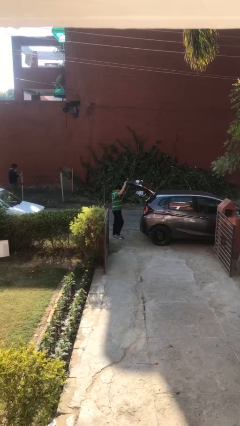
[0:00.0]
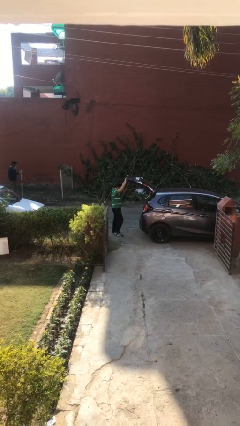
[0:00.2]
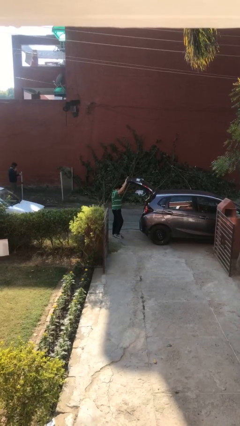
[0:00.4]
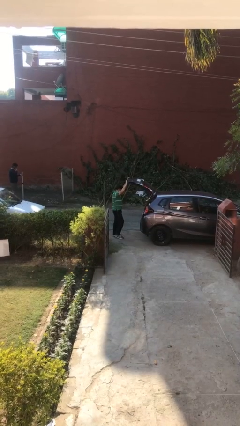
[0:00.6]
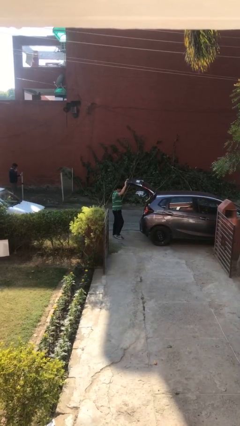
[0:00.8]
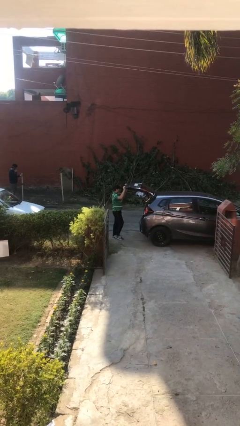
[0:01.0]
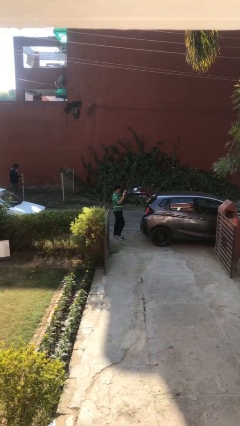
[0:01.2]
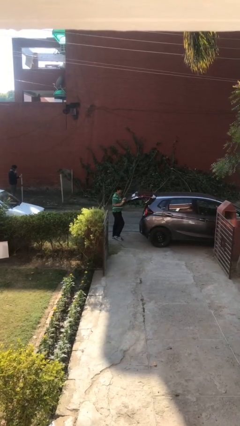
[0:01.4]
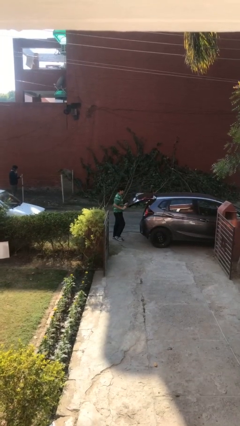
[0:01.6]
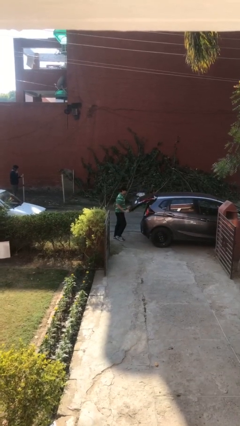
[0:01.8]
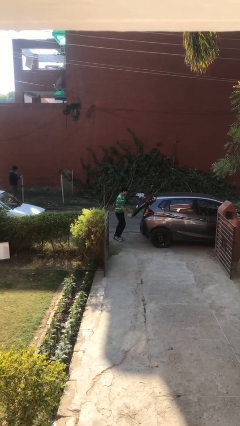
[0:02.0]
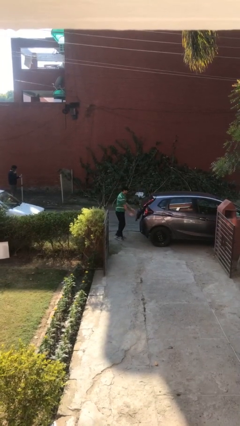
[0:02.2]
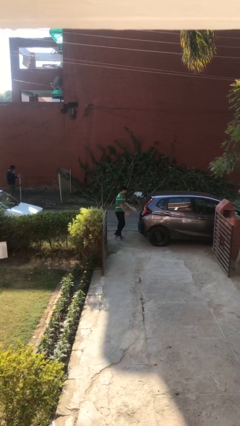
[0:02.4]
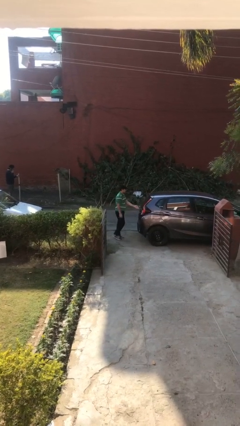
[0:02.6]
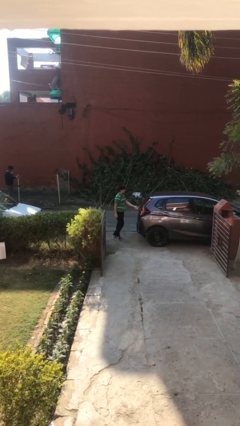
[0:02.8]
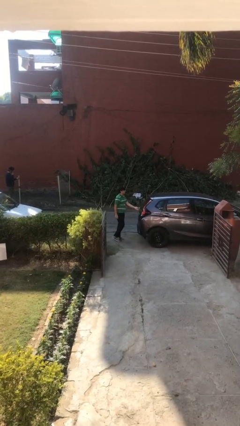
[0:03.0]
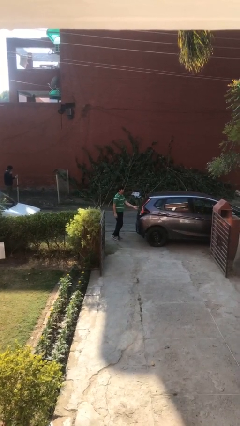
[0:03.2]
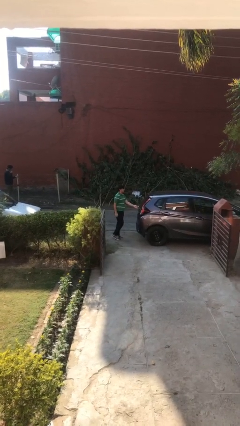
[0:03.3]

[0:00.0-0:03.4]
person closes car trunk

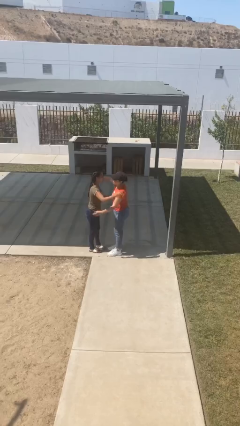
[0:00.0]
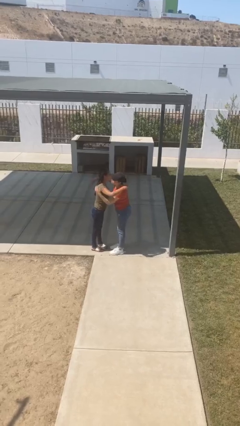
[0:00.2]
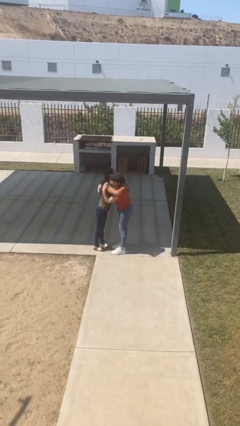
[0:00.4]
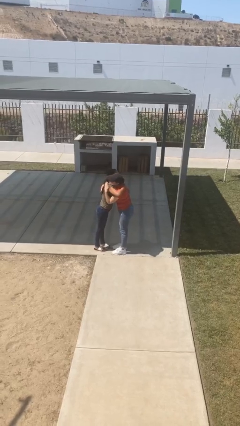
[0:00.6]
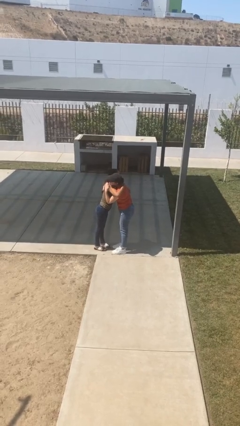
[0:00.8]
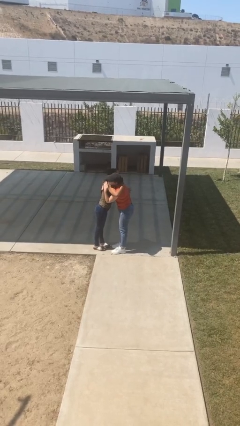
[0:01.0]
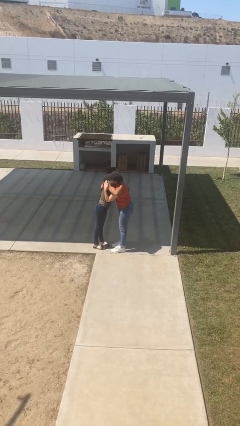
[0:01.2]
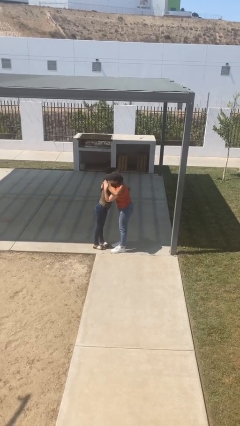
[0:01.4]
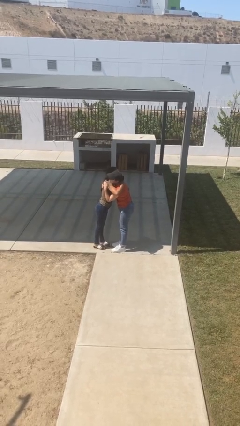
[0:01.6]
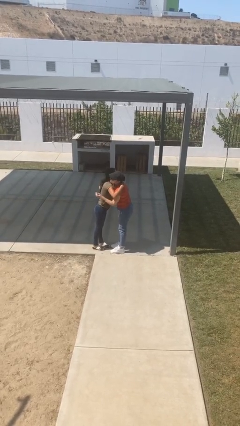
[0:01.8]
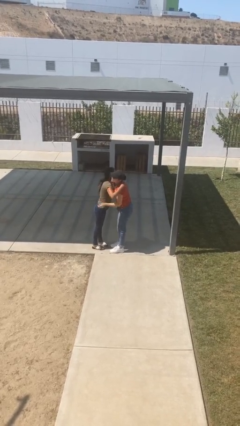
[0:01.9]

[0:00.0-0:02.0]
person embraces person

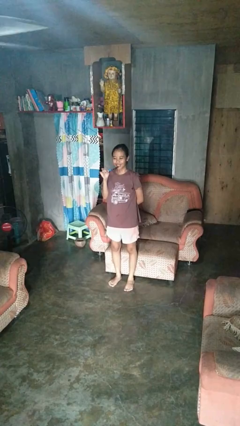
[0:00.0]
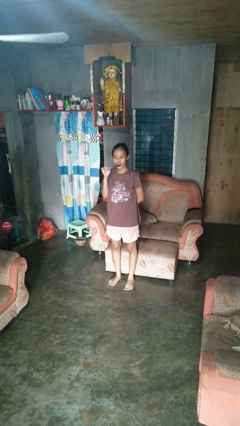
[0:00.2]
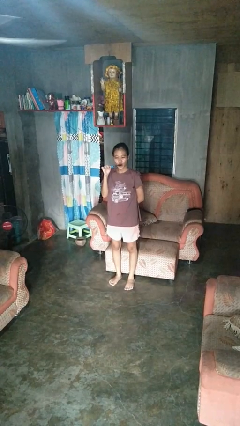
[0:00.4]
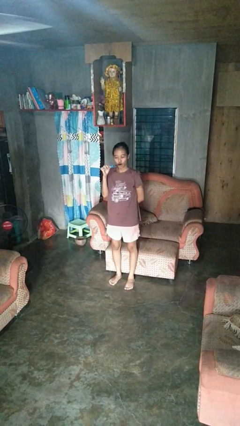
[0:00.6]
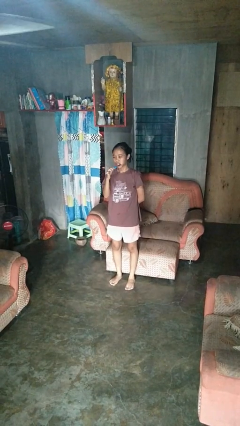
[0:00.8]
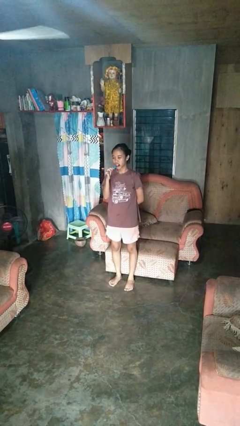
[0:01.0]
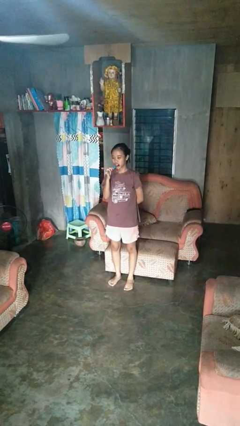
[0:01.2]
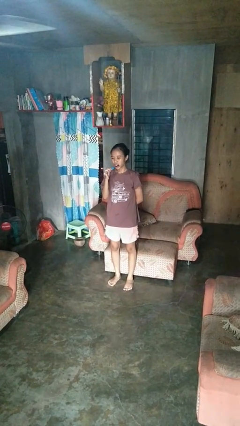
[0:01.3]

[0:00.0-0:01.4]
person brushes teeth

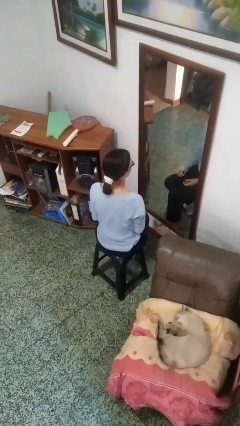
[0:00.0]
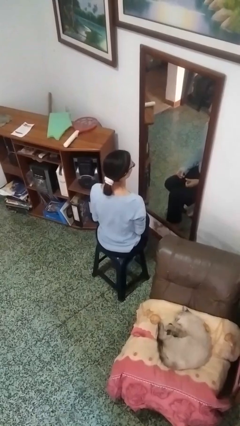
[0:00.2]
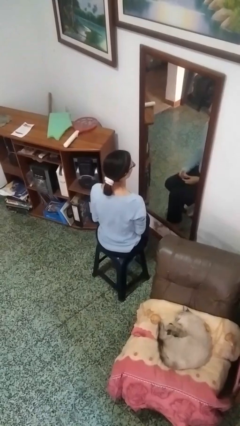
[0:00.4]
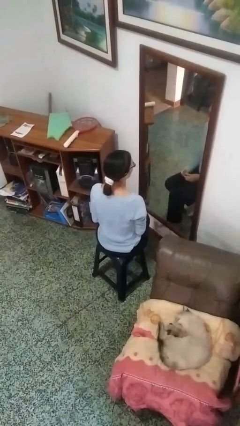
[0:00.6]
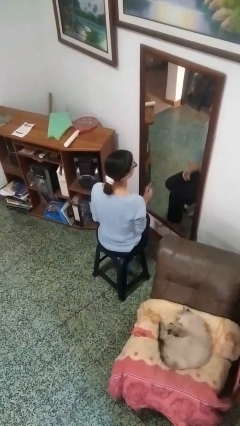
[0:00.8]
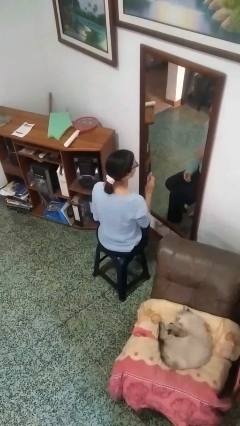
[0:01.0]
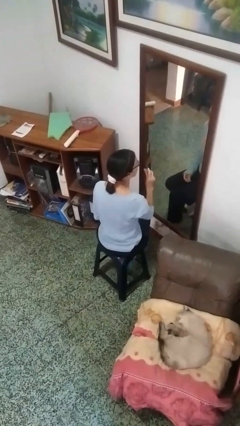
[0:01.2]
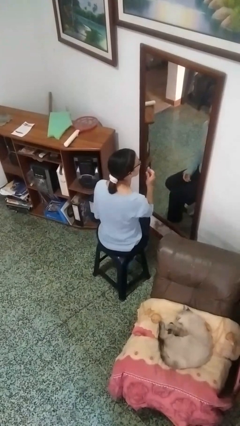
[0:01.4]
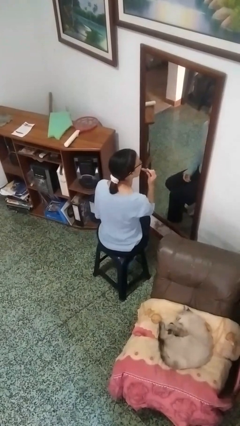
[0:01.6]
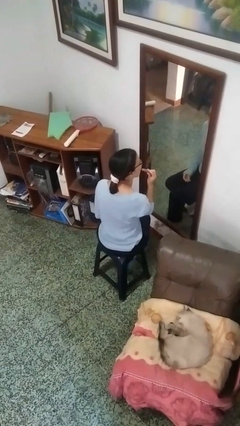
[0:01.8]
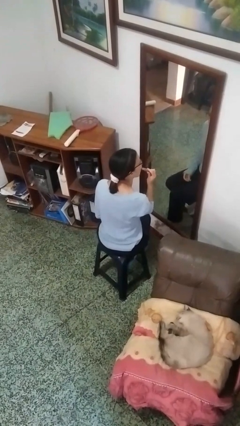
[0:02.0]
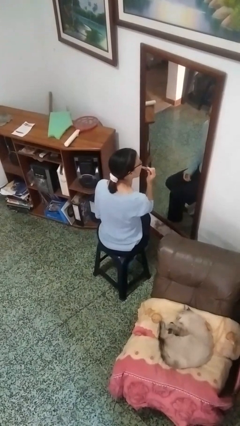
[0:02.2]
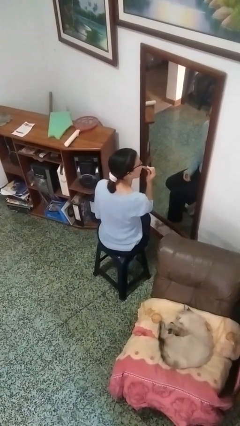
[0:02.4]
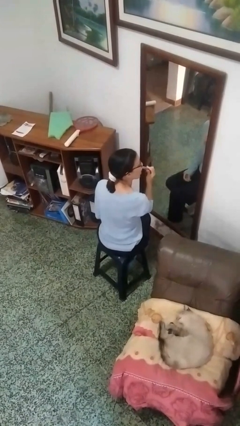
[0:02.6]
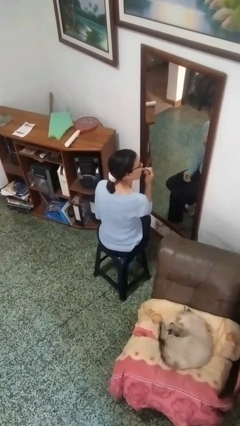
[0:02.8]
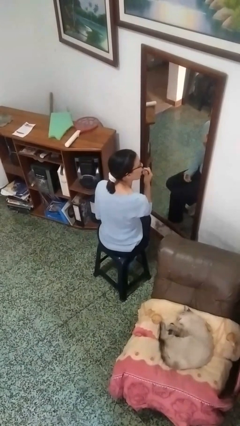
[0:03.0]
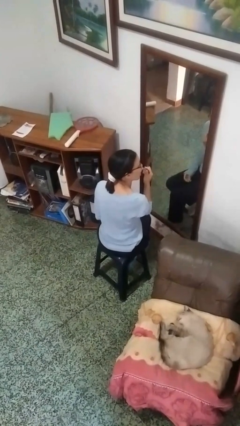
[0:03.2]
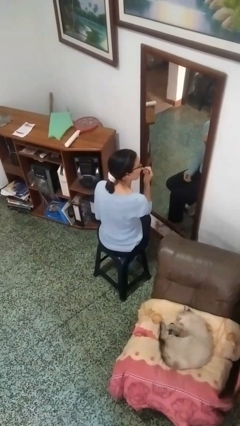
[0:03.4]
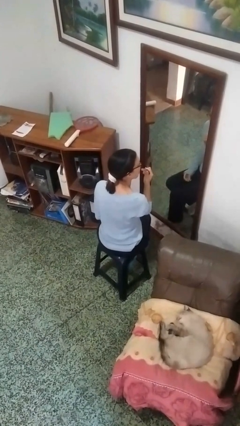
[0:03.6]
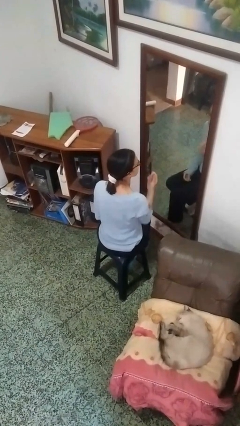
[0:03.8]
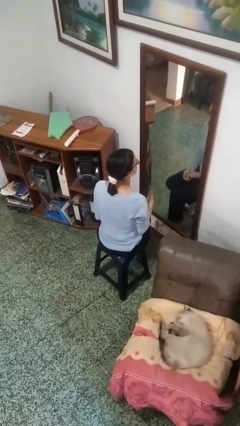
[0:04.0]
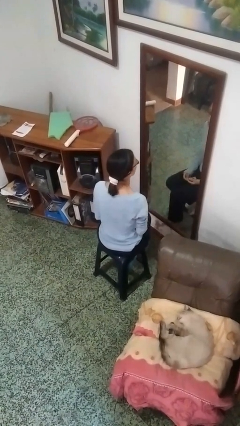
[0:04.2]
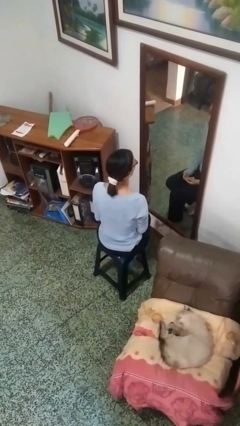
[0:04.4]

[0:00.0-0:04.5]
person applies lip makeup

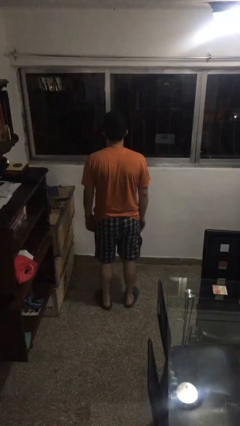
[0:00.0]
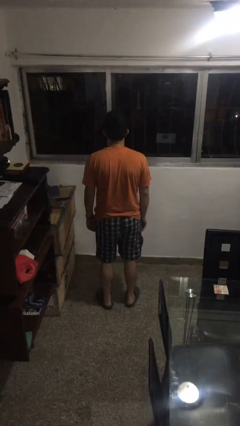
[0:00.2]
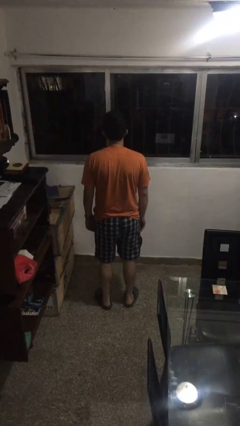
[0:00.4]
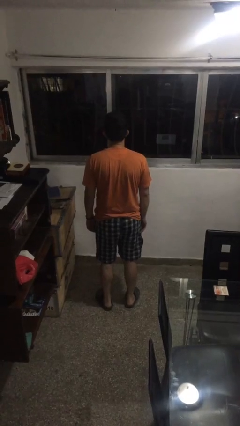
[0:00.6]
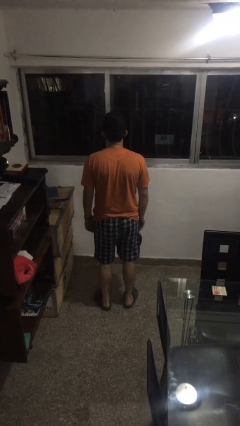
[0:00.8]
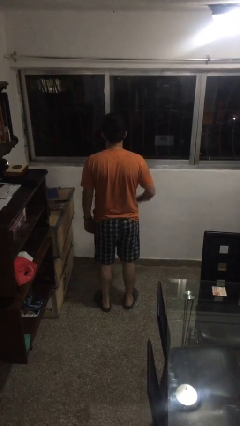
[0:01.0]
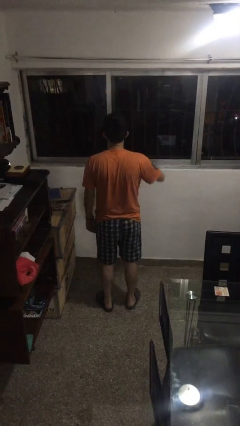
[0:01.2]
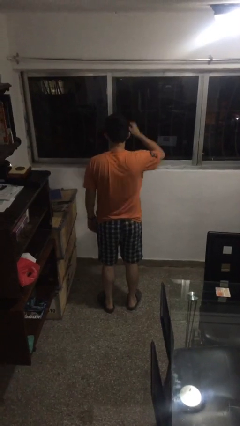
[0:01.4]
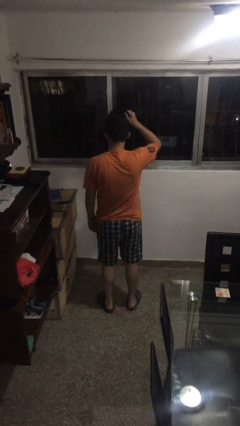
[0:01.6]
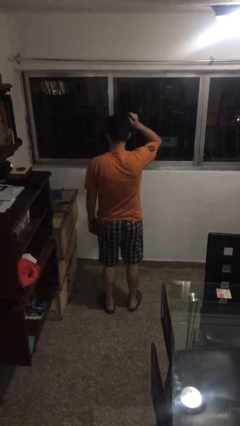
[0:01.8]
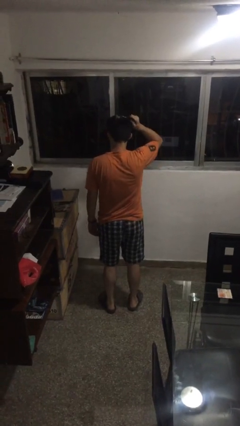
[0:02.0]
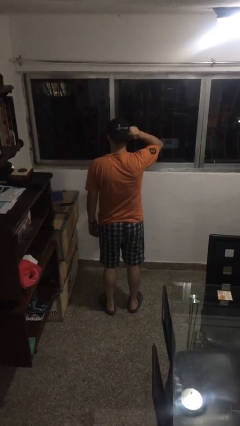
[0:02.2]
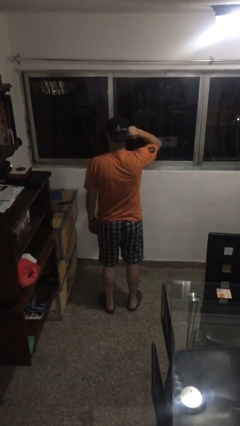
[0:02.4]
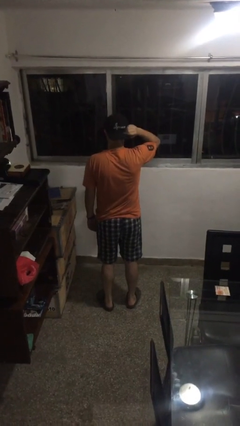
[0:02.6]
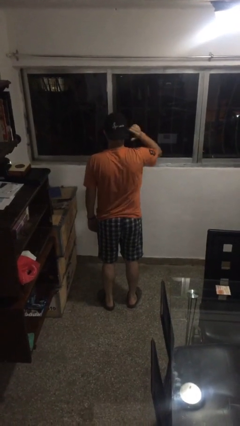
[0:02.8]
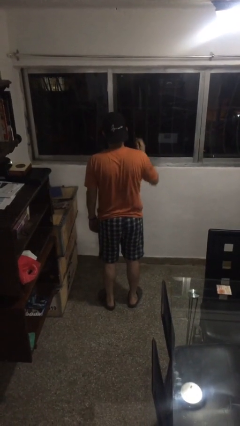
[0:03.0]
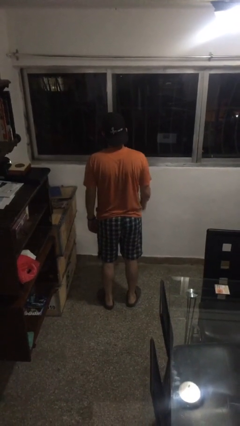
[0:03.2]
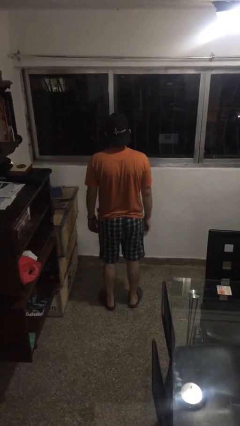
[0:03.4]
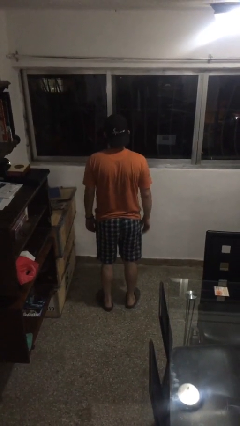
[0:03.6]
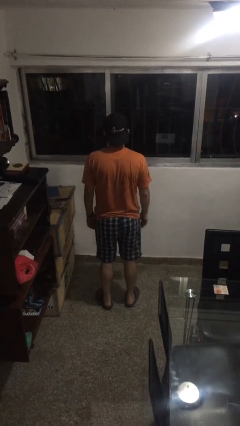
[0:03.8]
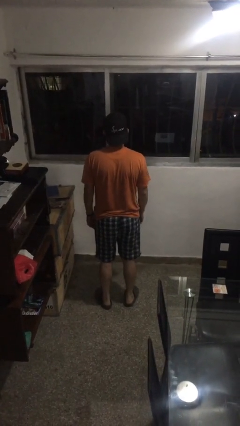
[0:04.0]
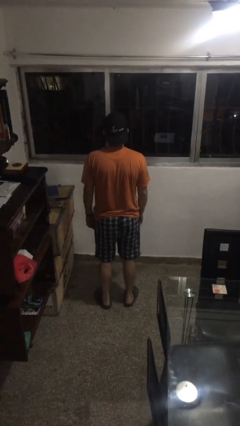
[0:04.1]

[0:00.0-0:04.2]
person puts on hat

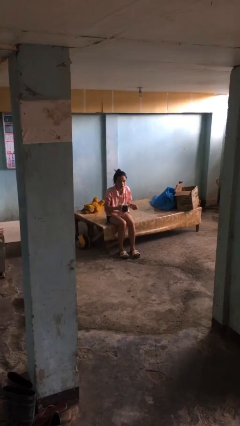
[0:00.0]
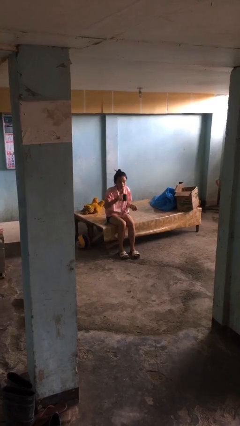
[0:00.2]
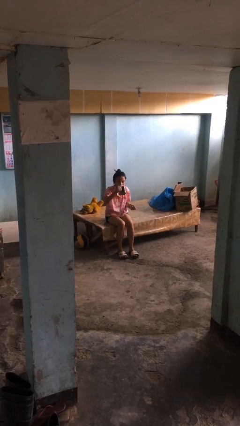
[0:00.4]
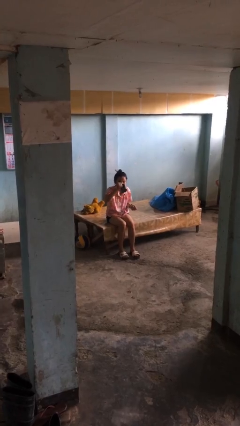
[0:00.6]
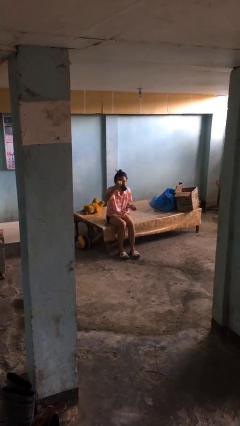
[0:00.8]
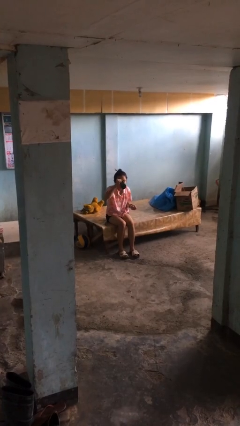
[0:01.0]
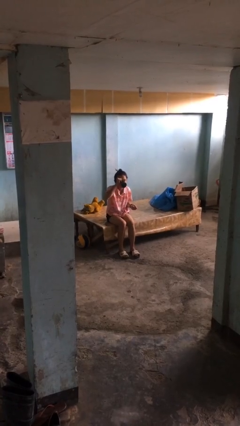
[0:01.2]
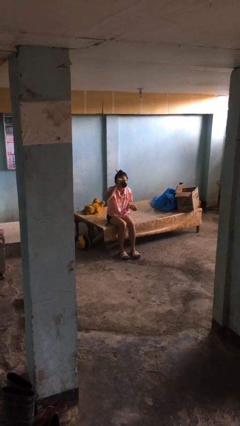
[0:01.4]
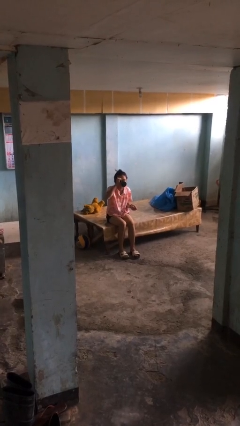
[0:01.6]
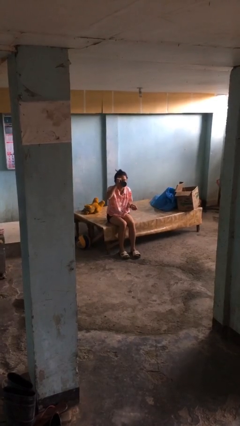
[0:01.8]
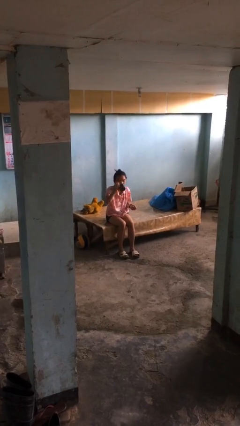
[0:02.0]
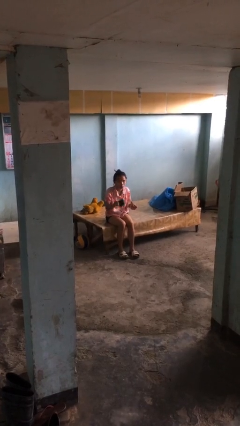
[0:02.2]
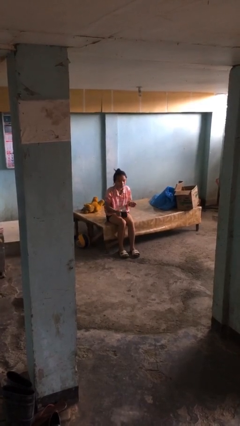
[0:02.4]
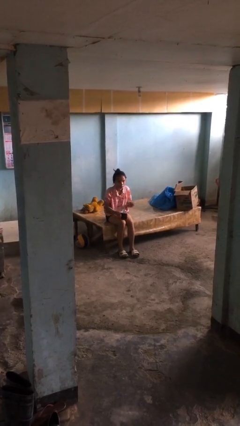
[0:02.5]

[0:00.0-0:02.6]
person drinks from mug
